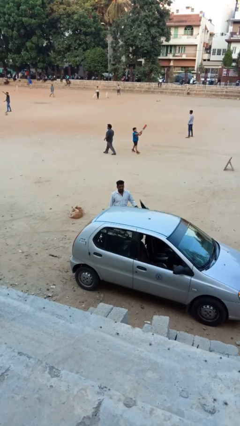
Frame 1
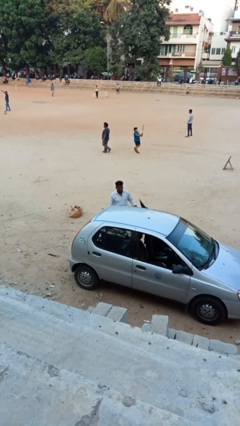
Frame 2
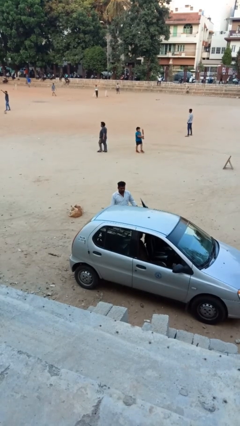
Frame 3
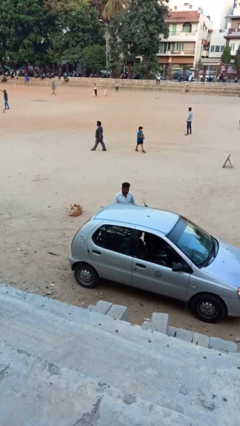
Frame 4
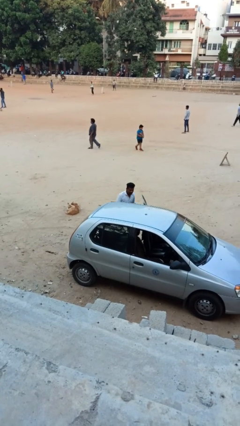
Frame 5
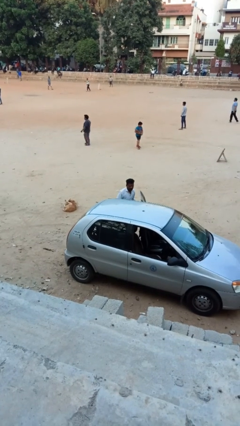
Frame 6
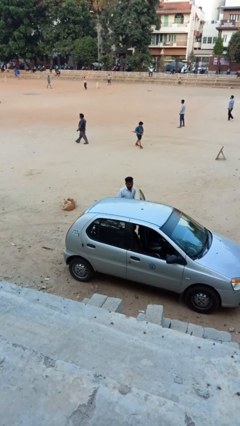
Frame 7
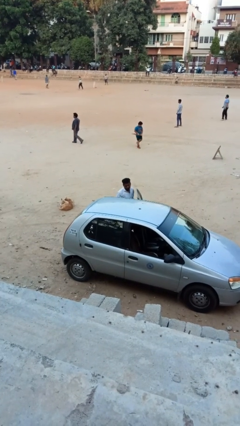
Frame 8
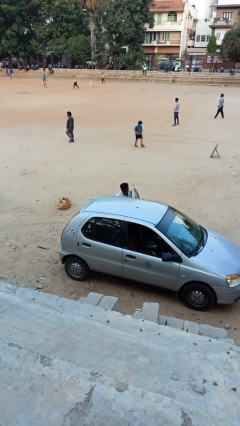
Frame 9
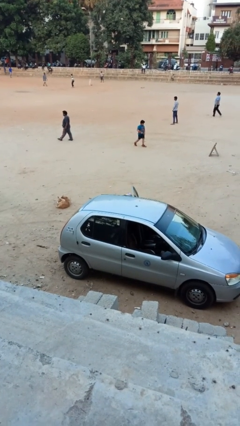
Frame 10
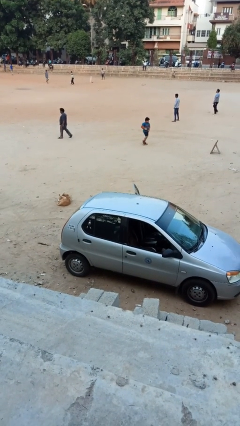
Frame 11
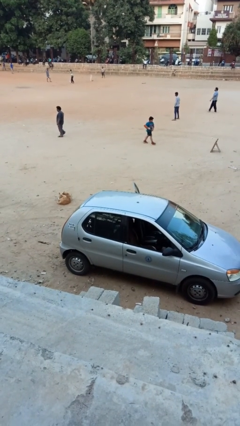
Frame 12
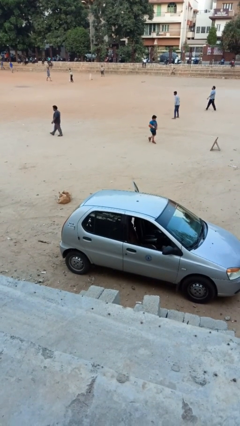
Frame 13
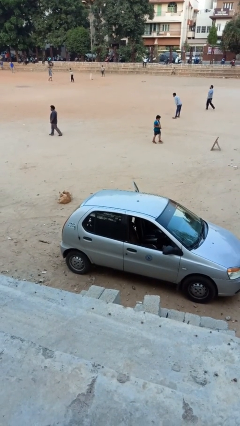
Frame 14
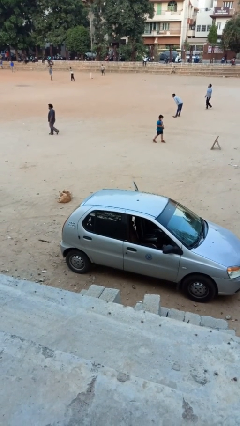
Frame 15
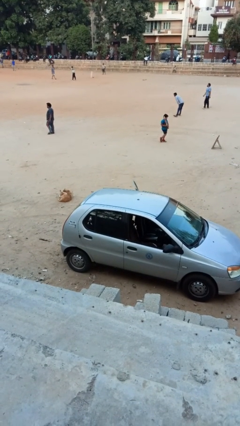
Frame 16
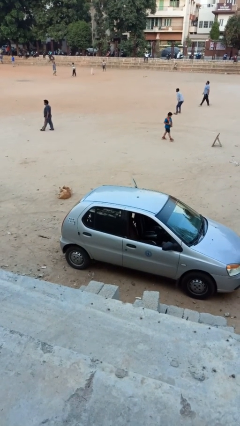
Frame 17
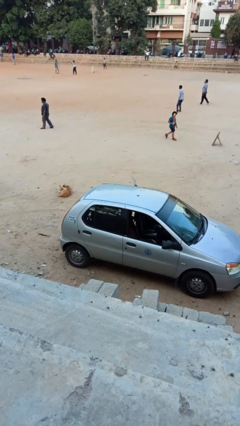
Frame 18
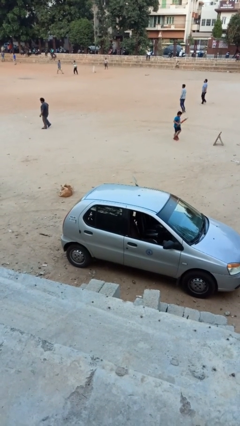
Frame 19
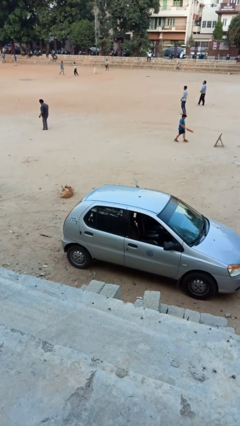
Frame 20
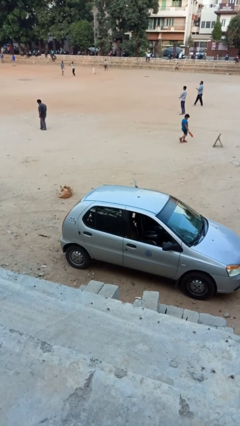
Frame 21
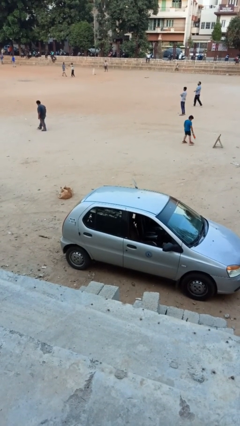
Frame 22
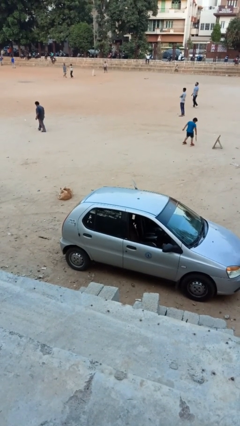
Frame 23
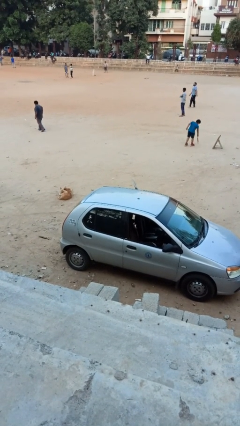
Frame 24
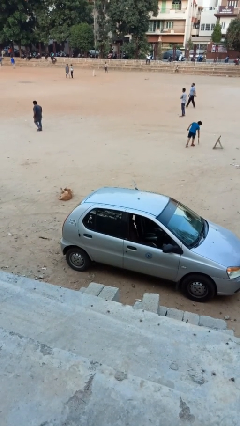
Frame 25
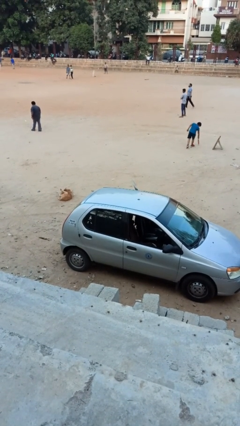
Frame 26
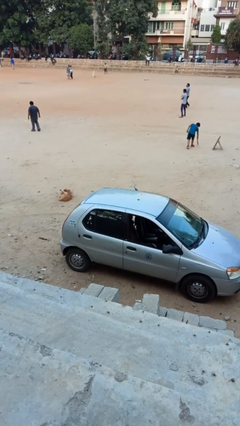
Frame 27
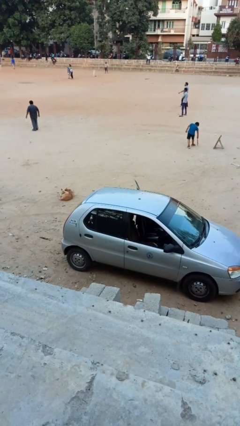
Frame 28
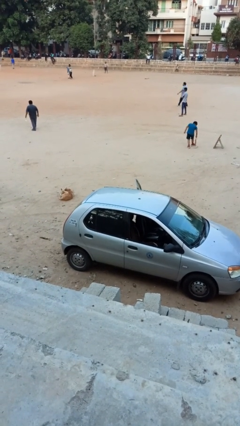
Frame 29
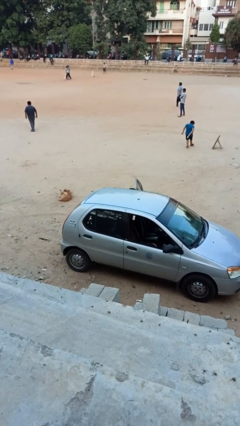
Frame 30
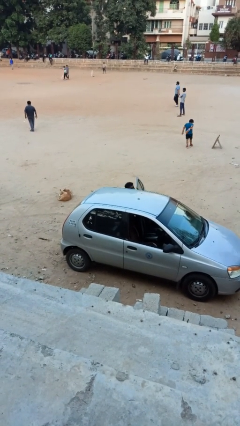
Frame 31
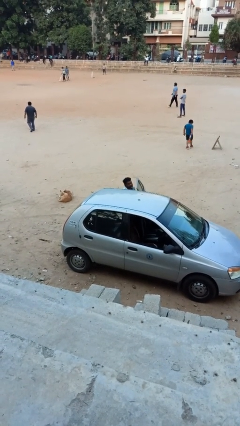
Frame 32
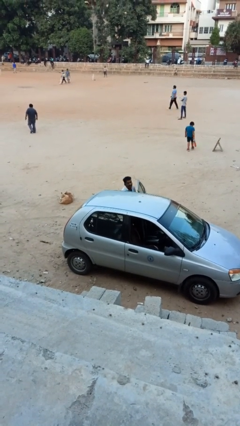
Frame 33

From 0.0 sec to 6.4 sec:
person enters car

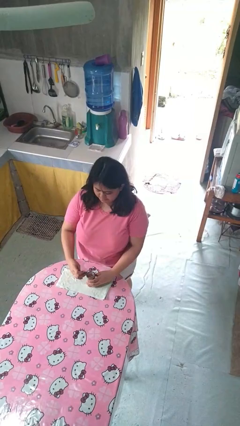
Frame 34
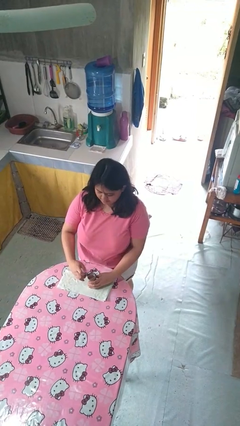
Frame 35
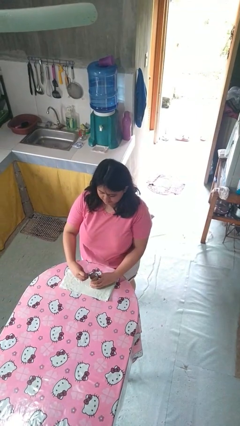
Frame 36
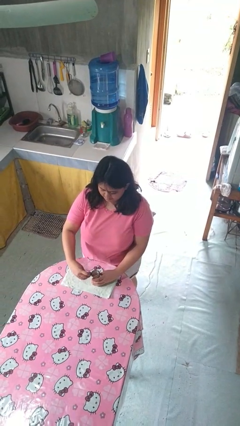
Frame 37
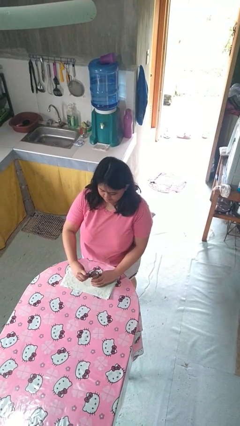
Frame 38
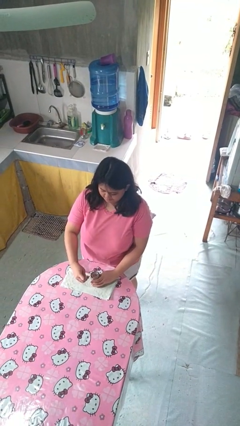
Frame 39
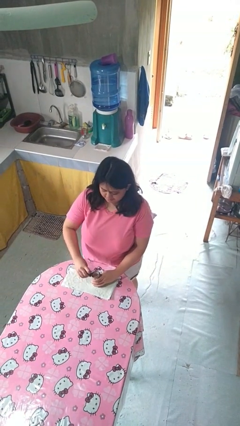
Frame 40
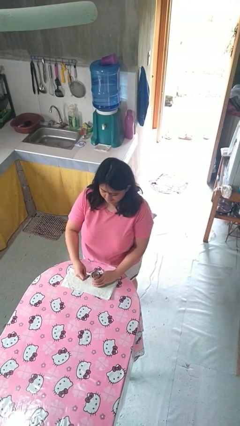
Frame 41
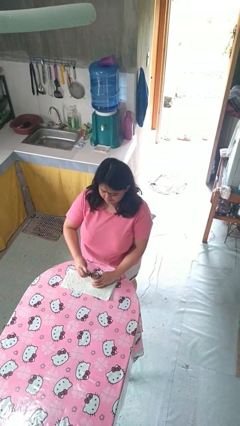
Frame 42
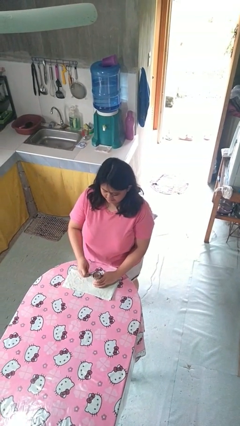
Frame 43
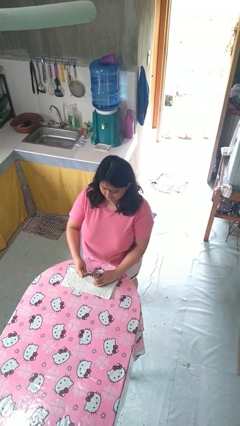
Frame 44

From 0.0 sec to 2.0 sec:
person opens can with can opener

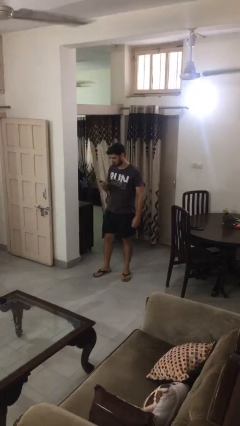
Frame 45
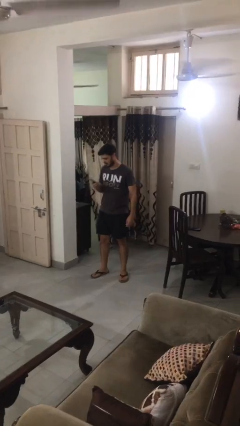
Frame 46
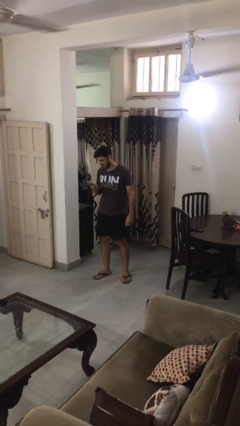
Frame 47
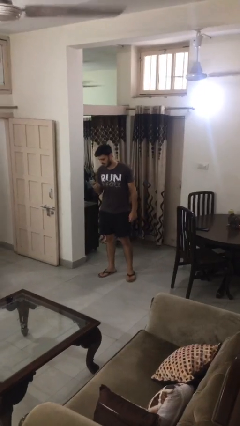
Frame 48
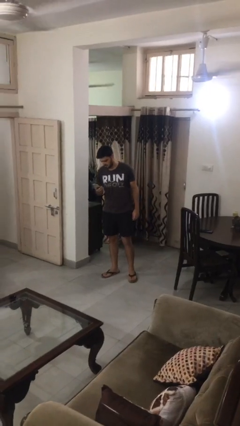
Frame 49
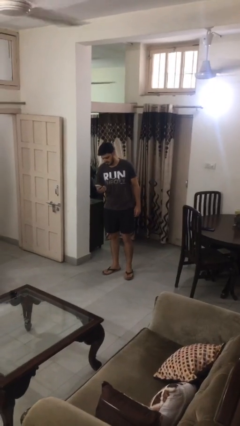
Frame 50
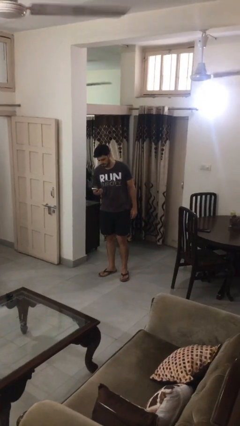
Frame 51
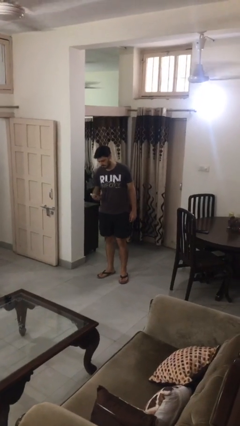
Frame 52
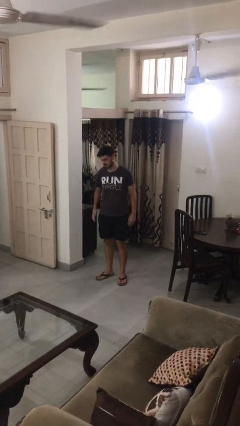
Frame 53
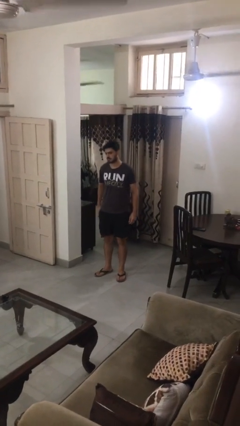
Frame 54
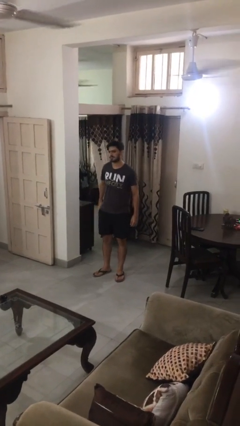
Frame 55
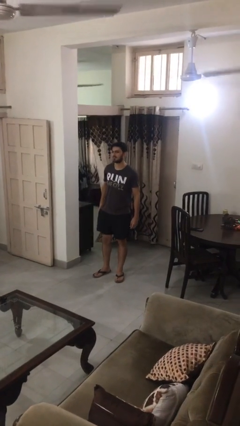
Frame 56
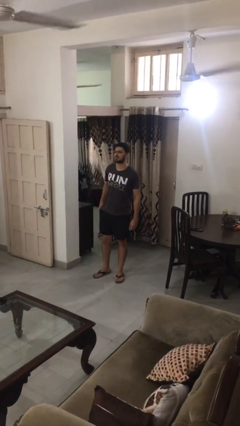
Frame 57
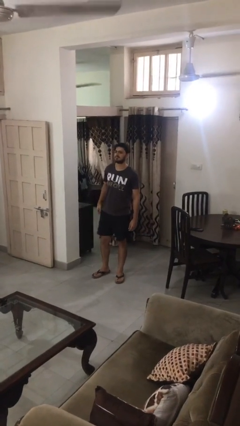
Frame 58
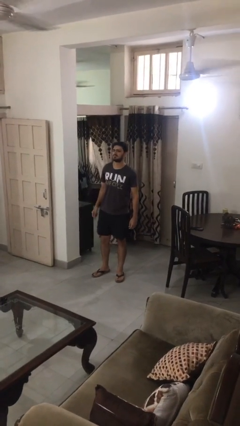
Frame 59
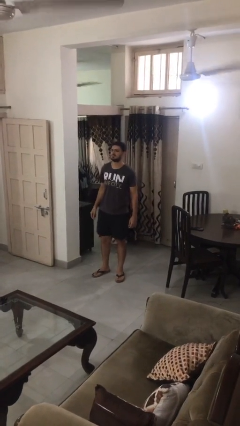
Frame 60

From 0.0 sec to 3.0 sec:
person puts phone into pocket

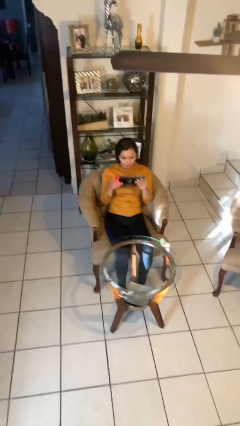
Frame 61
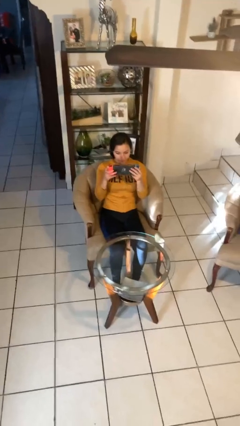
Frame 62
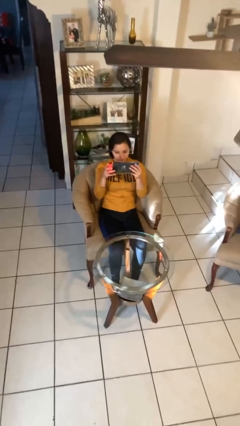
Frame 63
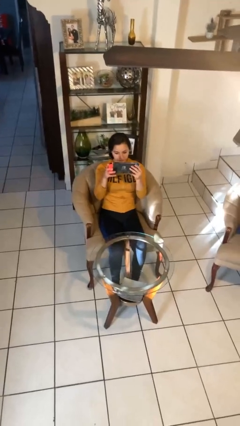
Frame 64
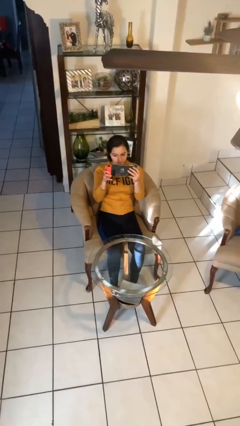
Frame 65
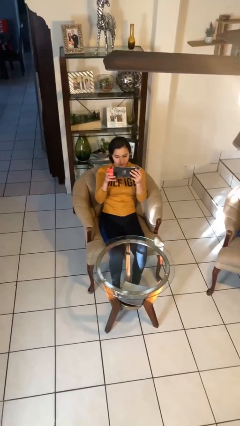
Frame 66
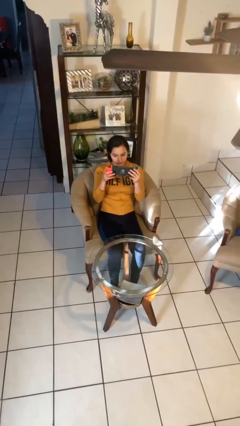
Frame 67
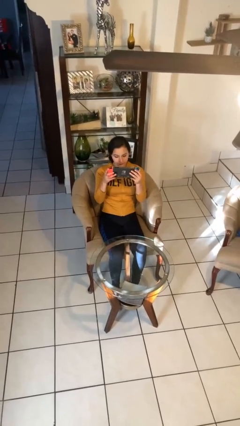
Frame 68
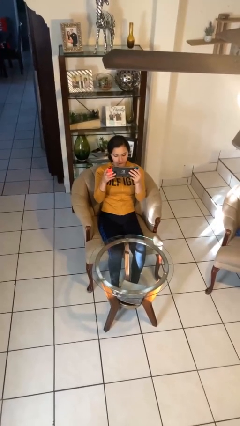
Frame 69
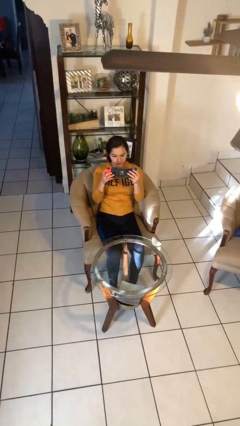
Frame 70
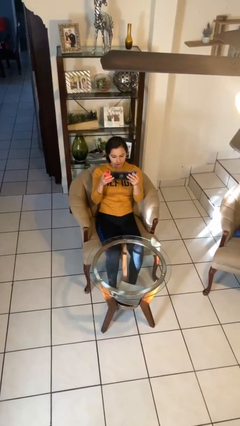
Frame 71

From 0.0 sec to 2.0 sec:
person interacts with handheld game

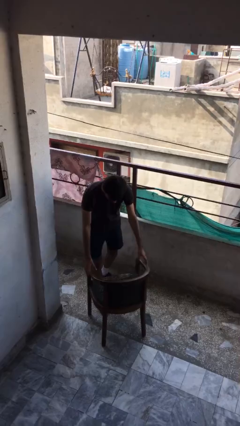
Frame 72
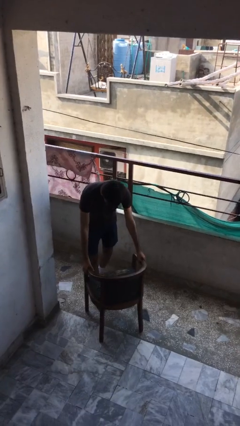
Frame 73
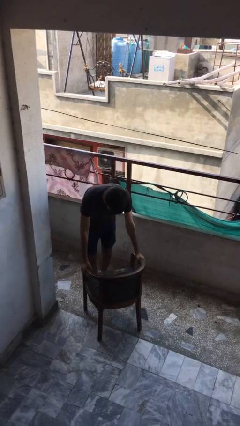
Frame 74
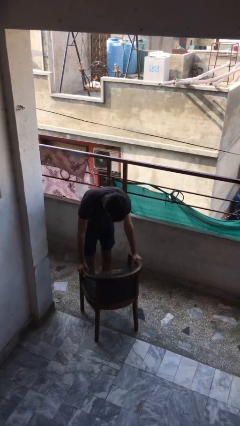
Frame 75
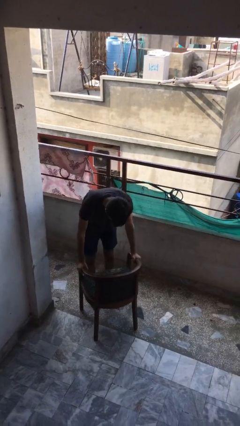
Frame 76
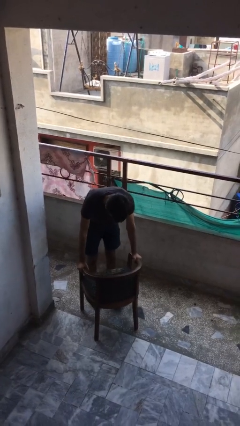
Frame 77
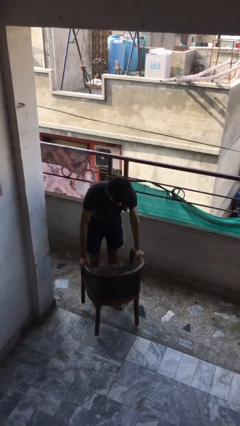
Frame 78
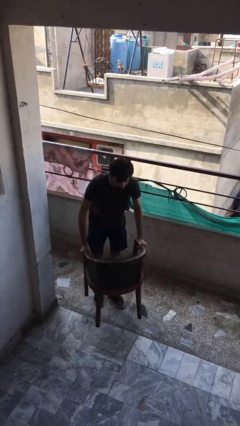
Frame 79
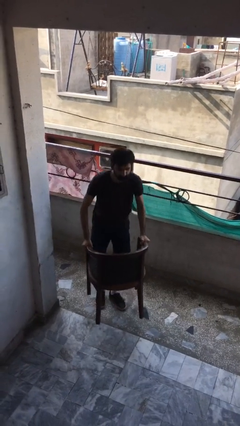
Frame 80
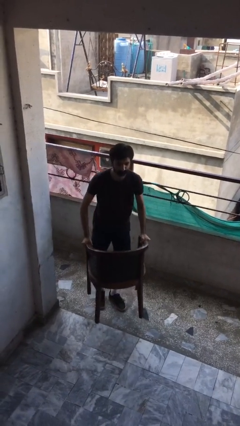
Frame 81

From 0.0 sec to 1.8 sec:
person picks up object from floor

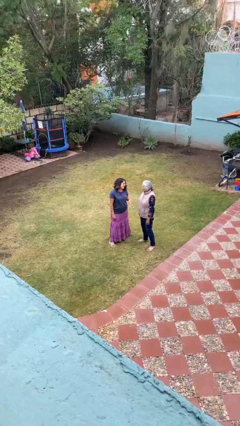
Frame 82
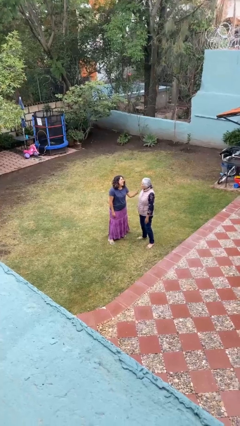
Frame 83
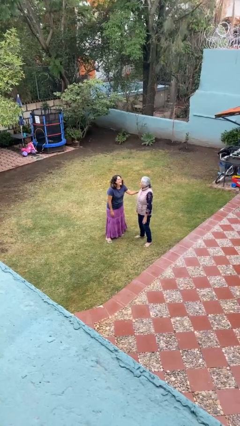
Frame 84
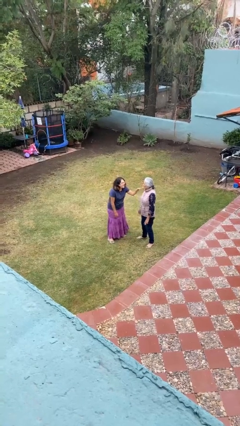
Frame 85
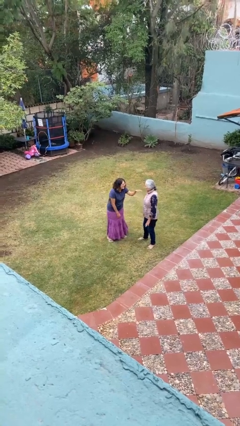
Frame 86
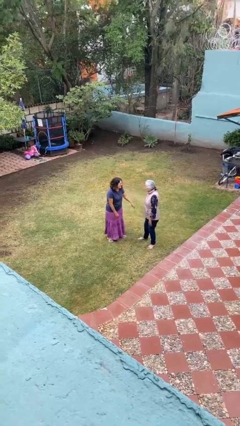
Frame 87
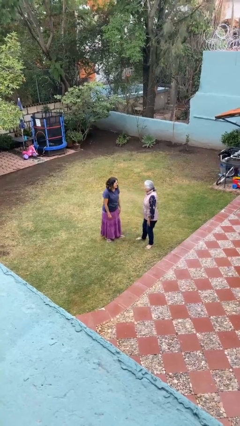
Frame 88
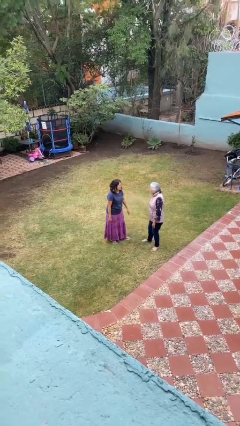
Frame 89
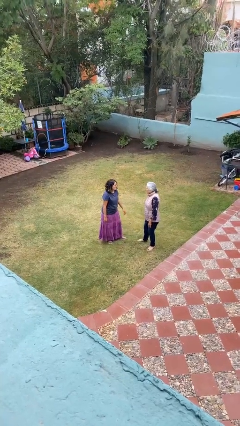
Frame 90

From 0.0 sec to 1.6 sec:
person shoves person

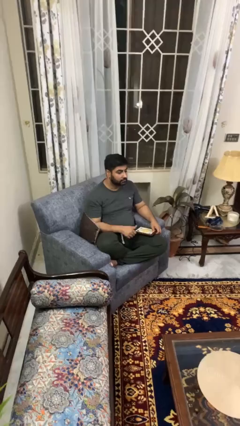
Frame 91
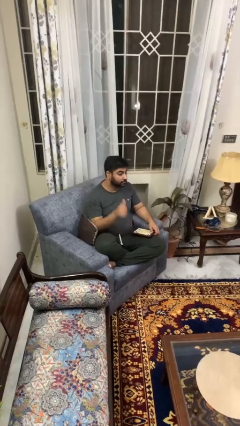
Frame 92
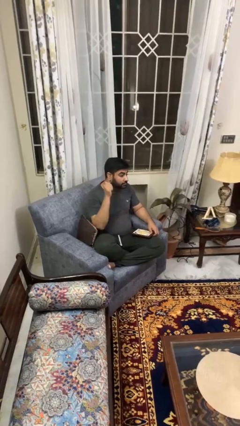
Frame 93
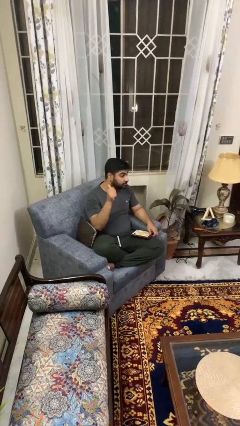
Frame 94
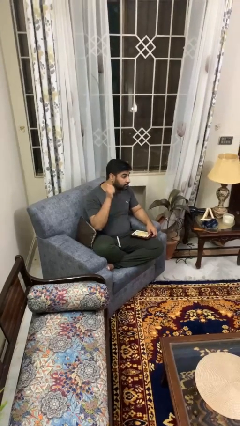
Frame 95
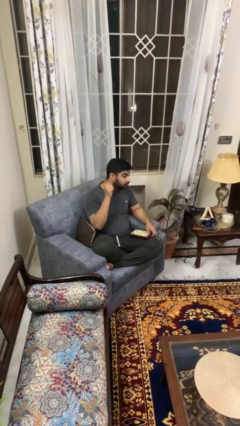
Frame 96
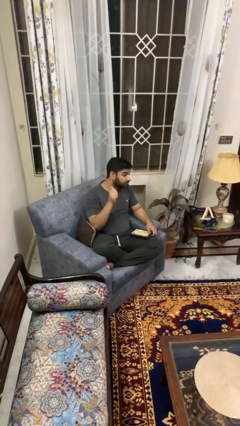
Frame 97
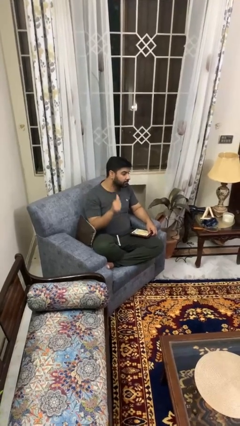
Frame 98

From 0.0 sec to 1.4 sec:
person gestures behind me
